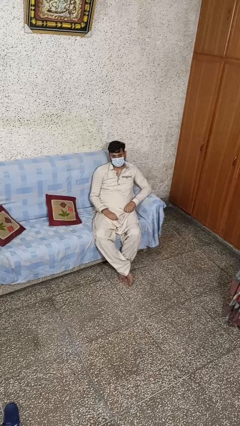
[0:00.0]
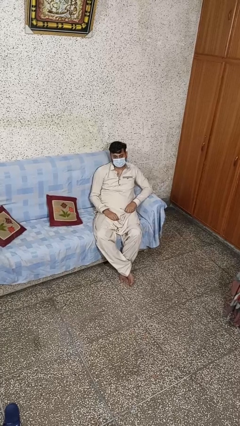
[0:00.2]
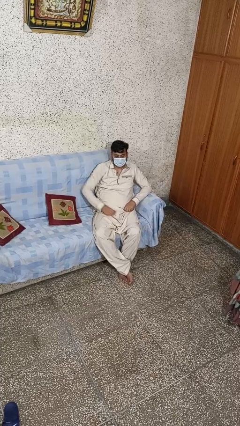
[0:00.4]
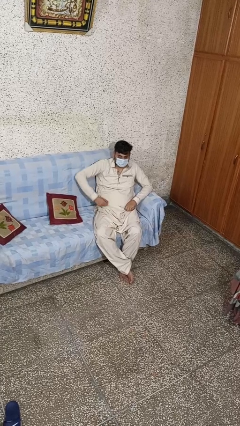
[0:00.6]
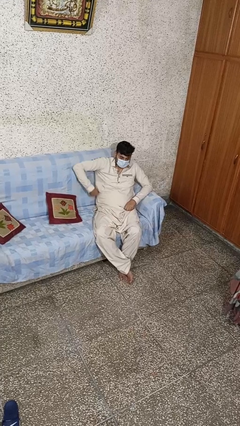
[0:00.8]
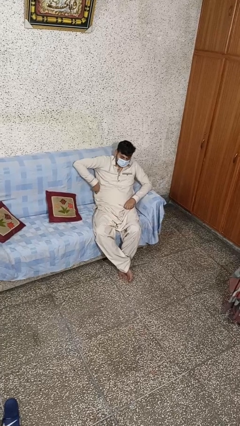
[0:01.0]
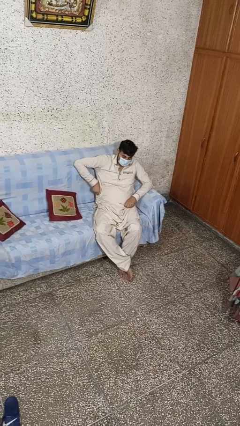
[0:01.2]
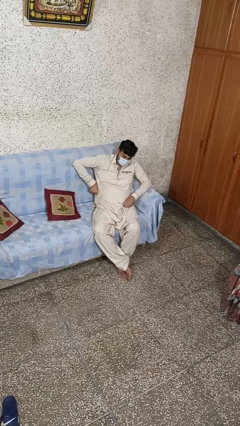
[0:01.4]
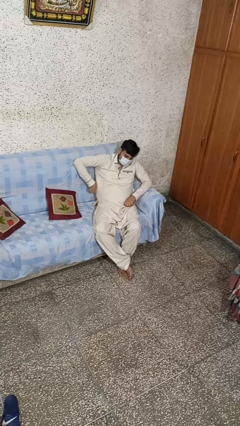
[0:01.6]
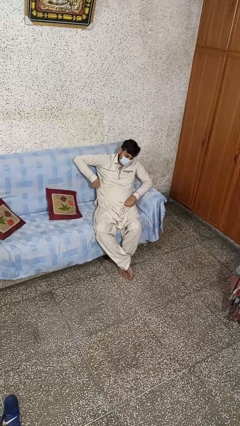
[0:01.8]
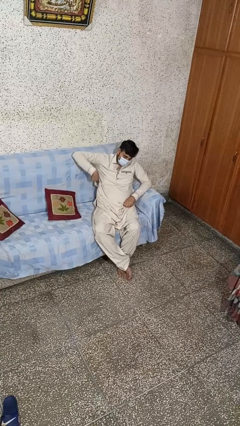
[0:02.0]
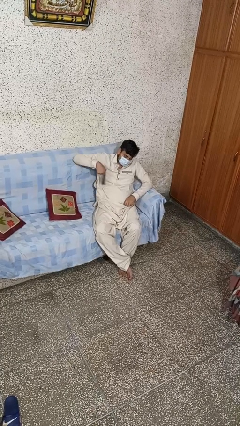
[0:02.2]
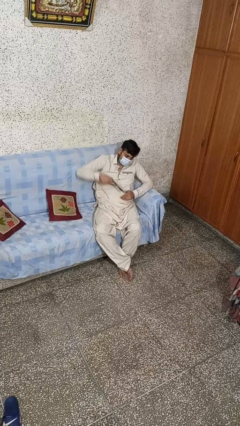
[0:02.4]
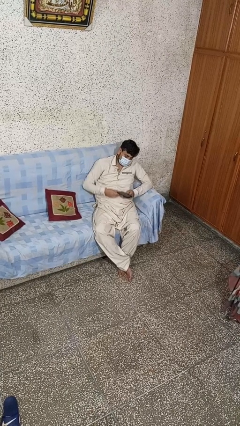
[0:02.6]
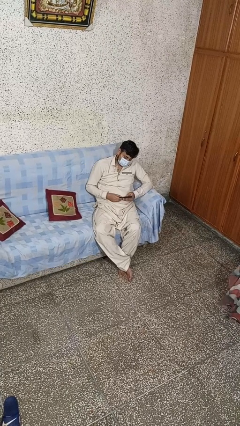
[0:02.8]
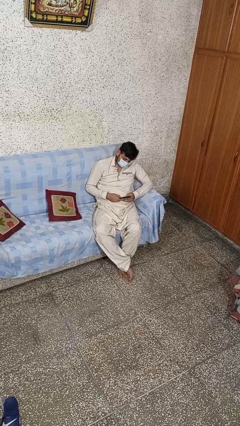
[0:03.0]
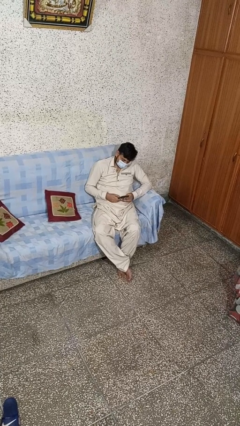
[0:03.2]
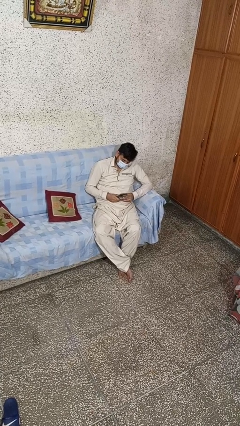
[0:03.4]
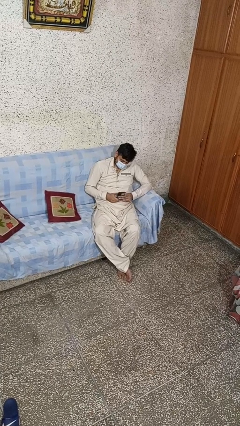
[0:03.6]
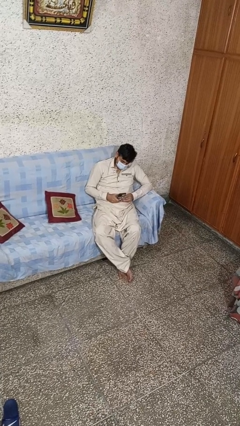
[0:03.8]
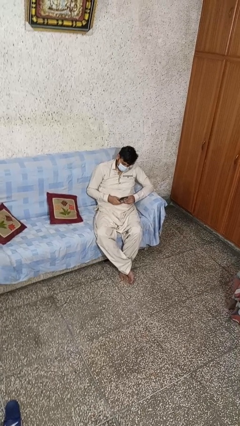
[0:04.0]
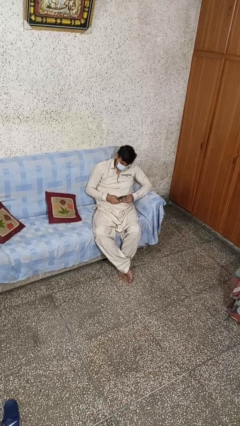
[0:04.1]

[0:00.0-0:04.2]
person takes phone from pocket

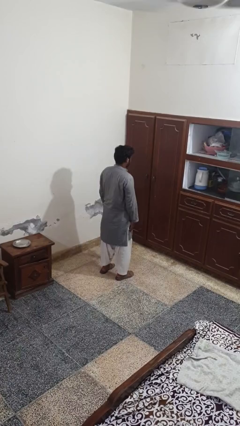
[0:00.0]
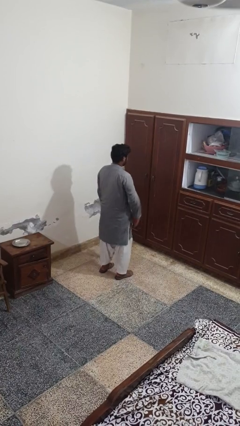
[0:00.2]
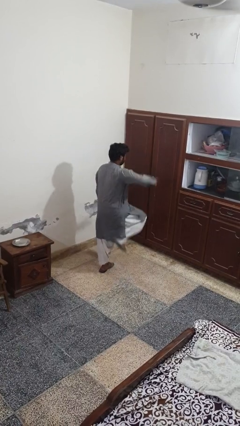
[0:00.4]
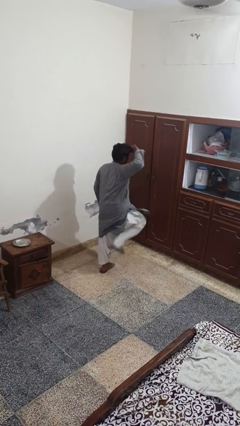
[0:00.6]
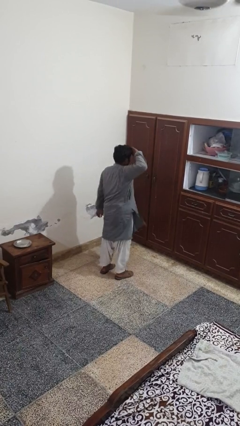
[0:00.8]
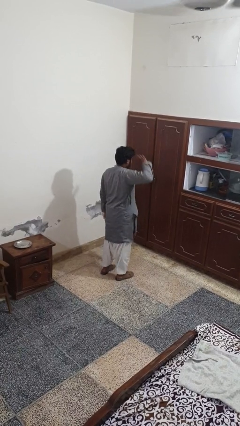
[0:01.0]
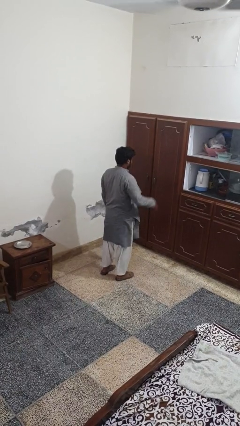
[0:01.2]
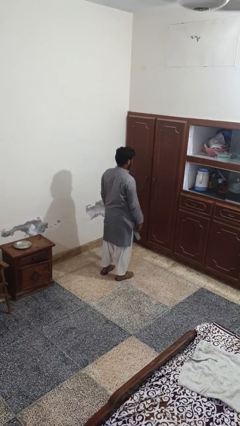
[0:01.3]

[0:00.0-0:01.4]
person salutes

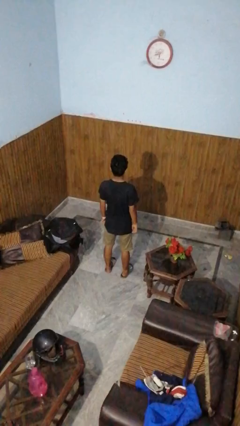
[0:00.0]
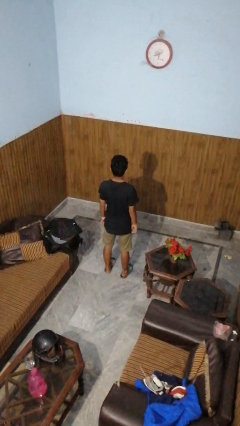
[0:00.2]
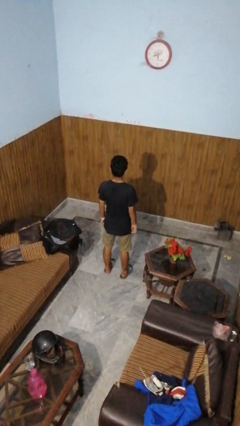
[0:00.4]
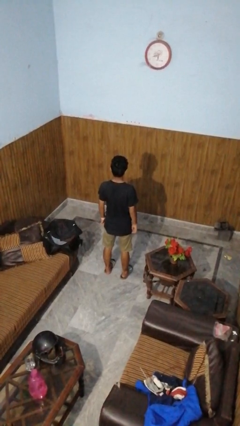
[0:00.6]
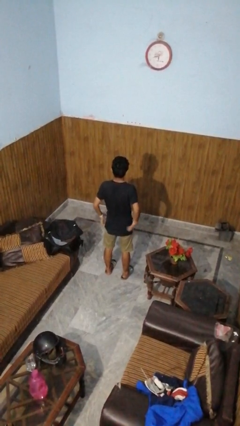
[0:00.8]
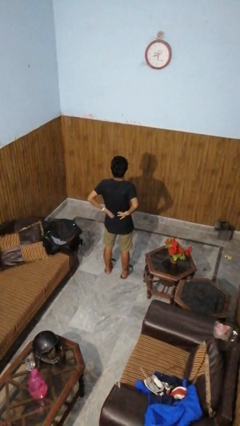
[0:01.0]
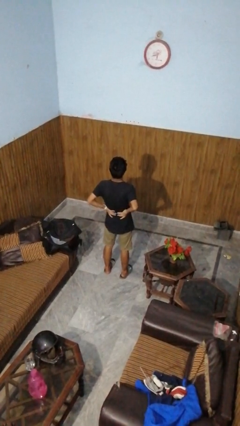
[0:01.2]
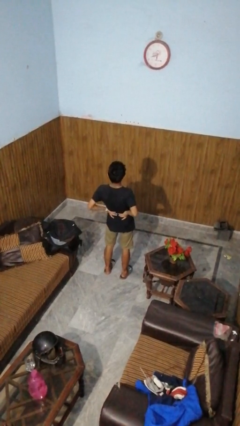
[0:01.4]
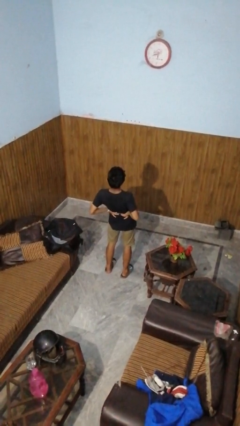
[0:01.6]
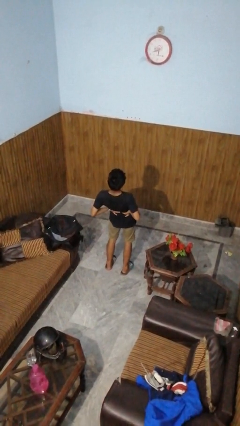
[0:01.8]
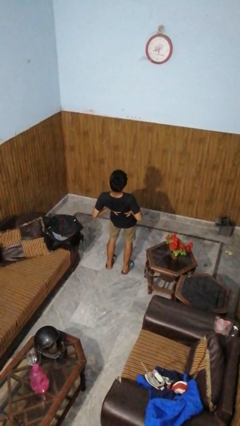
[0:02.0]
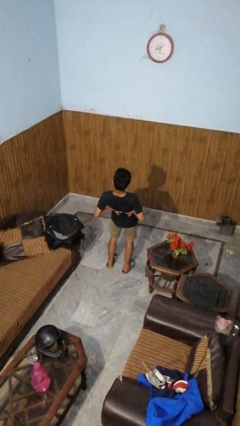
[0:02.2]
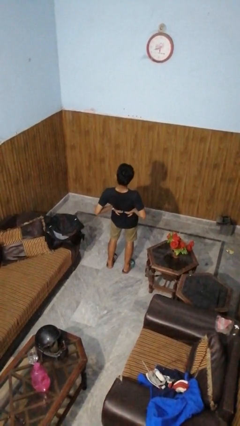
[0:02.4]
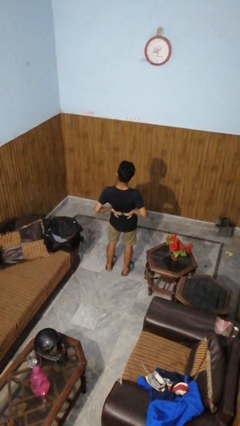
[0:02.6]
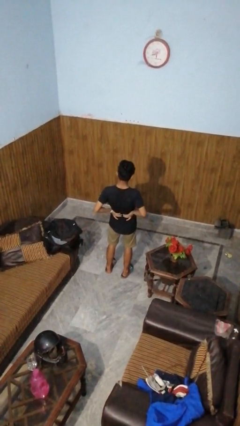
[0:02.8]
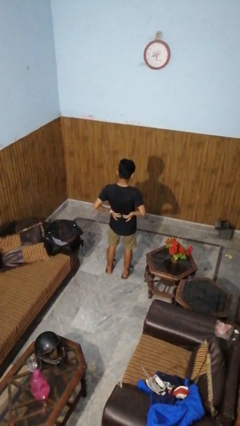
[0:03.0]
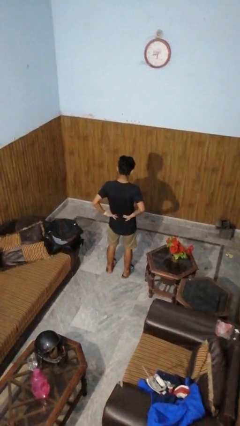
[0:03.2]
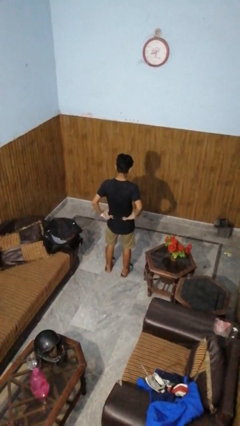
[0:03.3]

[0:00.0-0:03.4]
person stretches back

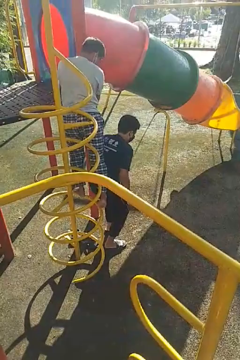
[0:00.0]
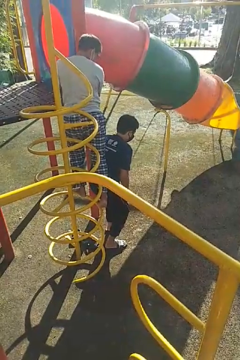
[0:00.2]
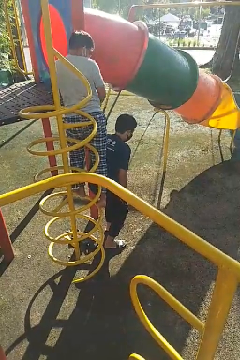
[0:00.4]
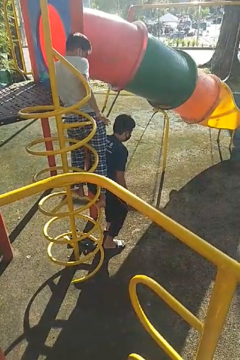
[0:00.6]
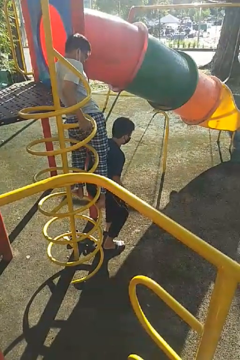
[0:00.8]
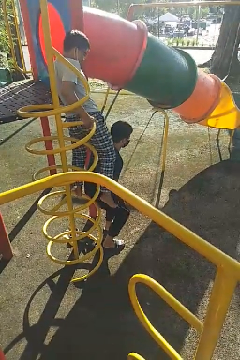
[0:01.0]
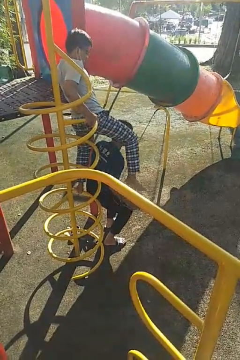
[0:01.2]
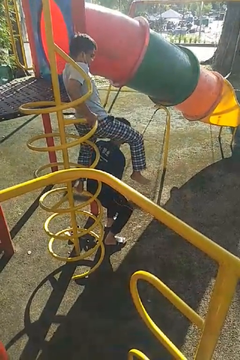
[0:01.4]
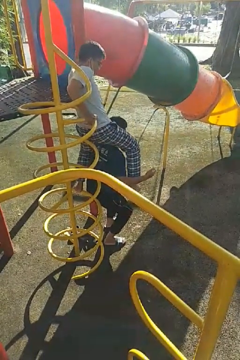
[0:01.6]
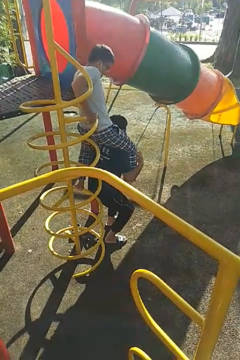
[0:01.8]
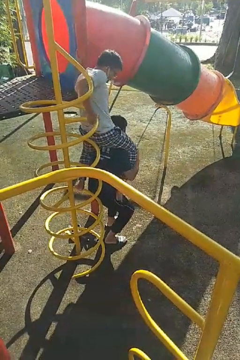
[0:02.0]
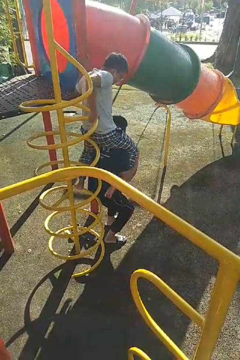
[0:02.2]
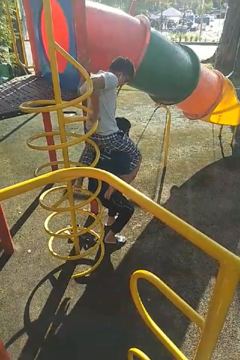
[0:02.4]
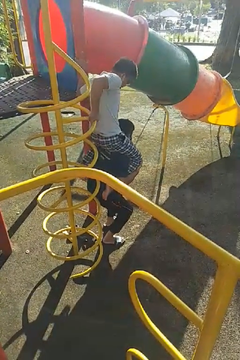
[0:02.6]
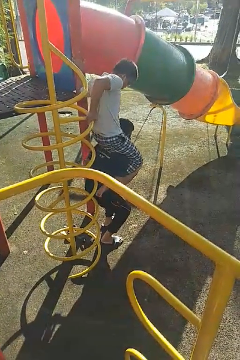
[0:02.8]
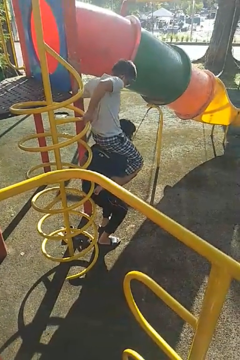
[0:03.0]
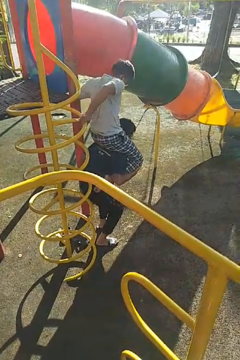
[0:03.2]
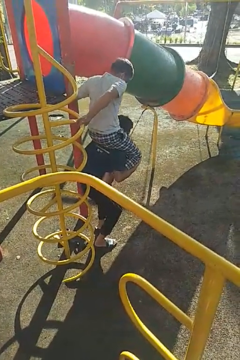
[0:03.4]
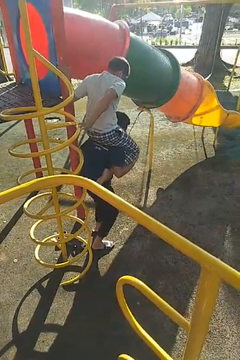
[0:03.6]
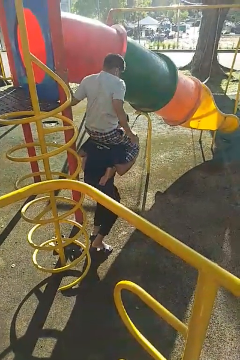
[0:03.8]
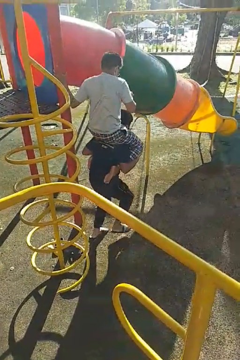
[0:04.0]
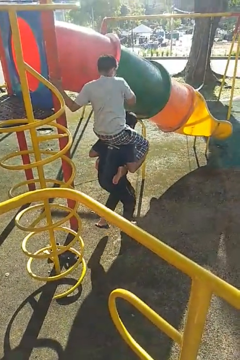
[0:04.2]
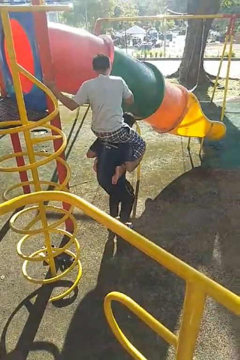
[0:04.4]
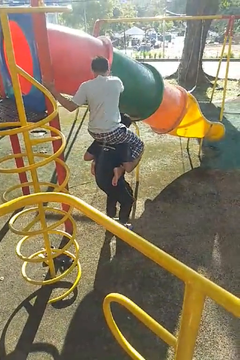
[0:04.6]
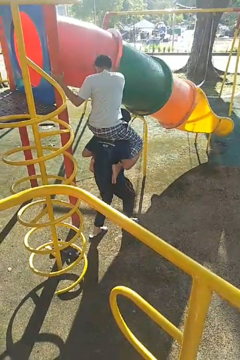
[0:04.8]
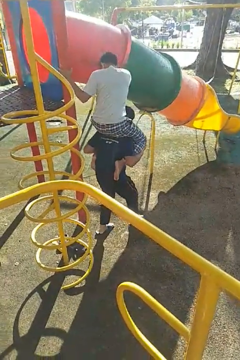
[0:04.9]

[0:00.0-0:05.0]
person carries person on shoulders

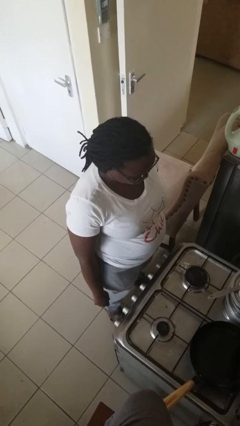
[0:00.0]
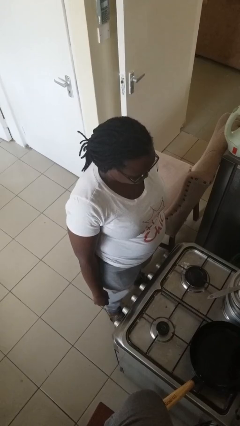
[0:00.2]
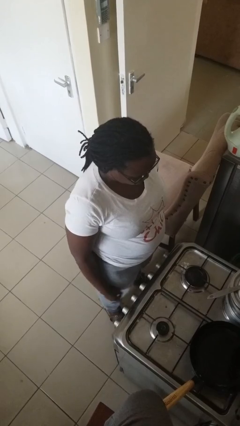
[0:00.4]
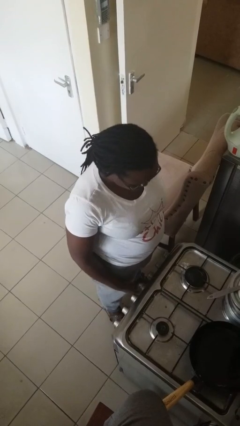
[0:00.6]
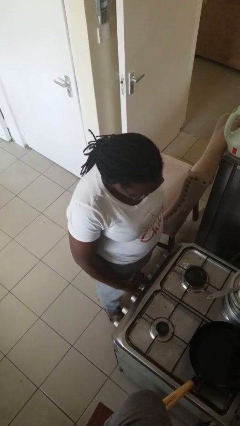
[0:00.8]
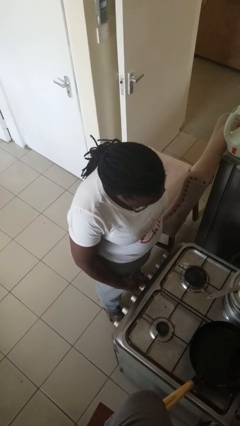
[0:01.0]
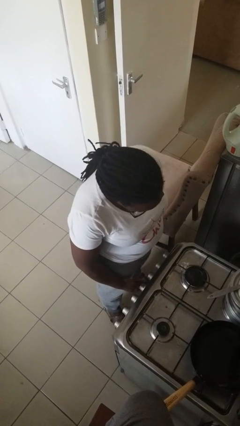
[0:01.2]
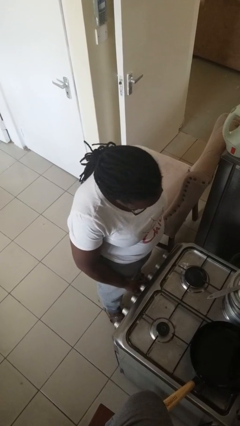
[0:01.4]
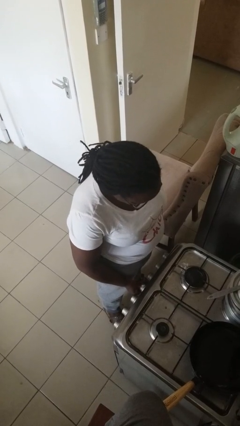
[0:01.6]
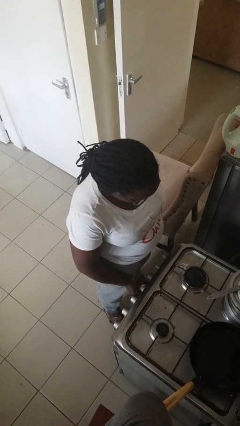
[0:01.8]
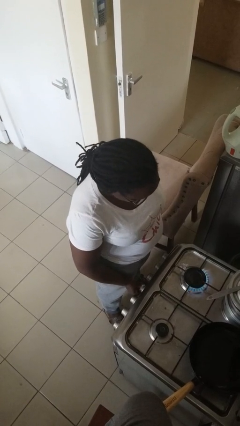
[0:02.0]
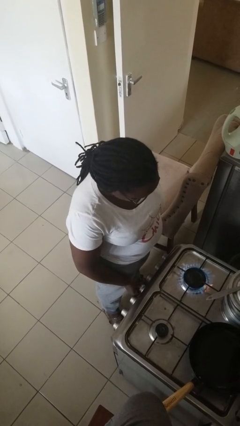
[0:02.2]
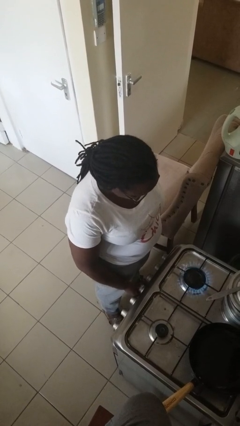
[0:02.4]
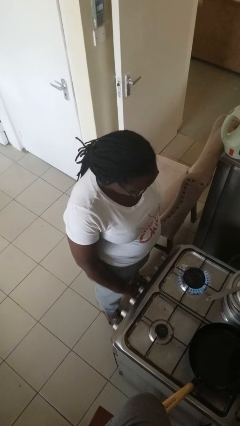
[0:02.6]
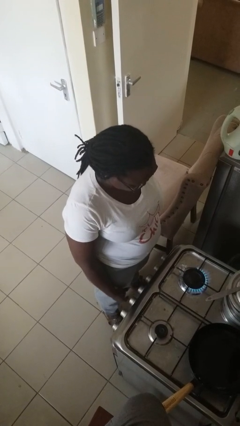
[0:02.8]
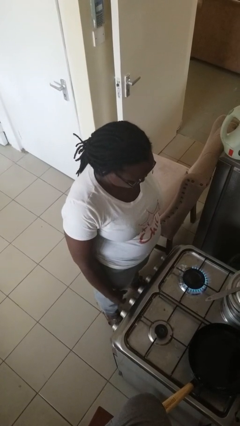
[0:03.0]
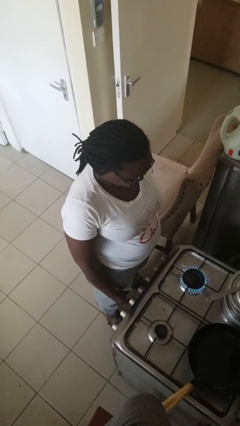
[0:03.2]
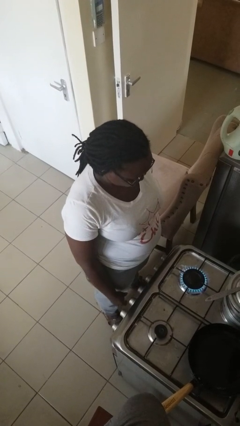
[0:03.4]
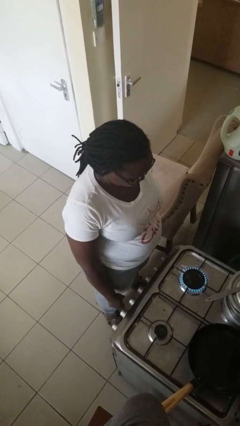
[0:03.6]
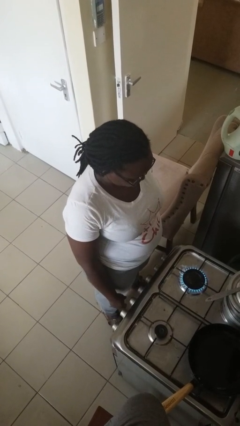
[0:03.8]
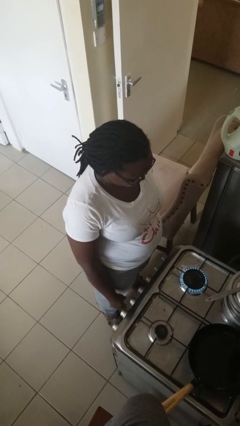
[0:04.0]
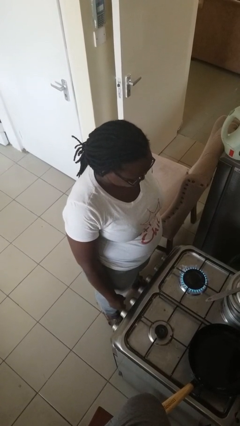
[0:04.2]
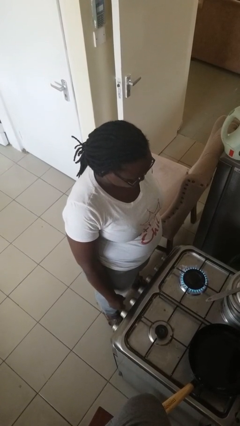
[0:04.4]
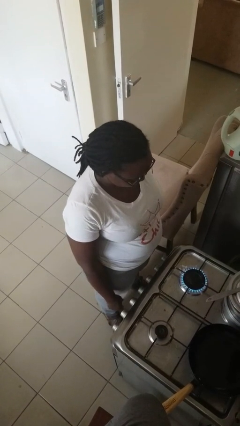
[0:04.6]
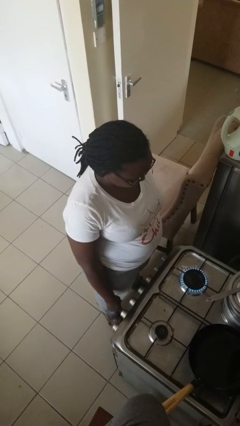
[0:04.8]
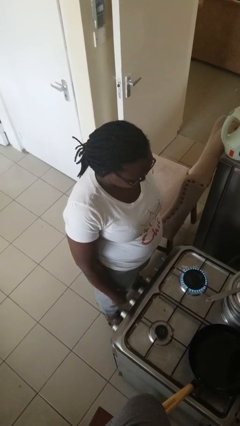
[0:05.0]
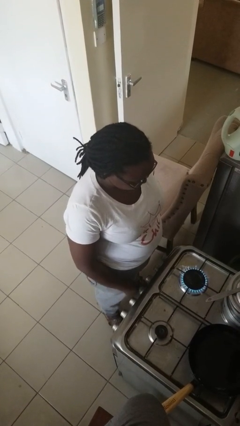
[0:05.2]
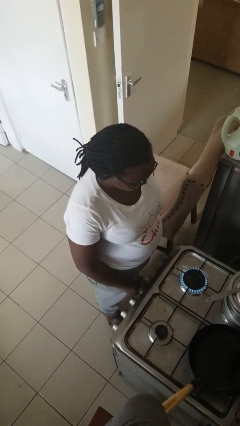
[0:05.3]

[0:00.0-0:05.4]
person turns on stovetop
